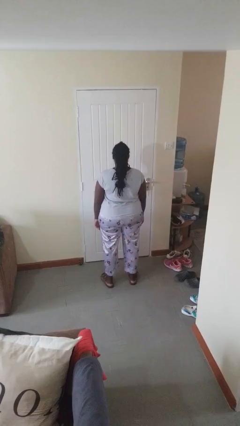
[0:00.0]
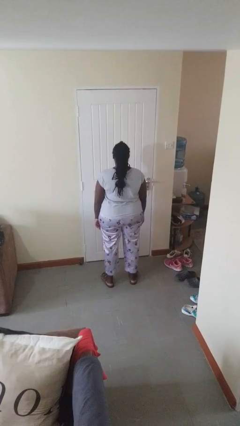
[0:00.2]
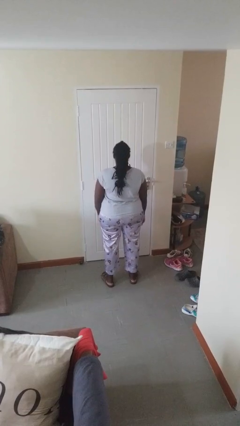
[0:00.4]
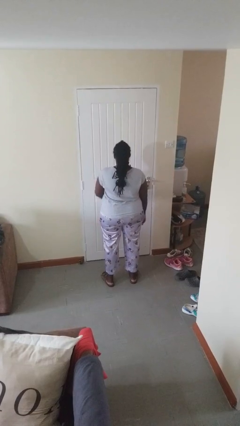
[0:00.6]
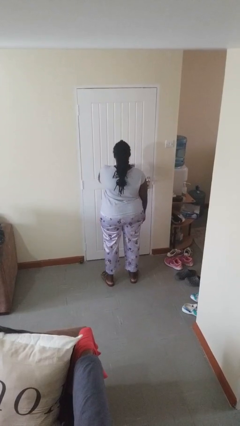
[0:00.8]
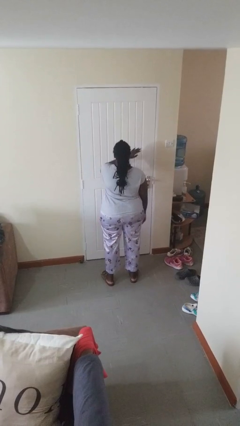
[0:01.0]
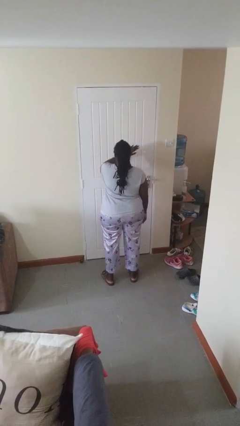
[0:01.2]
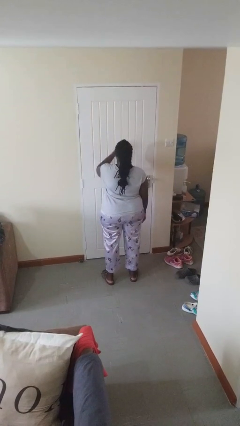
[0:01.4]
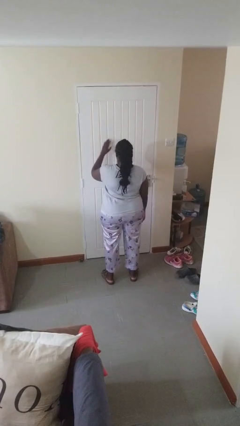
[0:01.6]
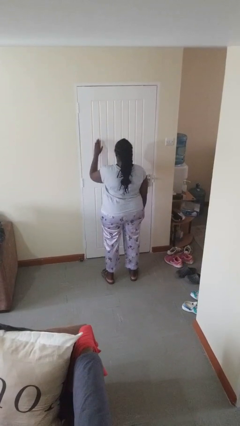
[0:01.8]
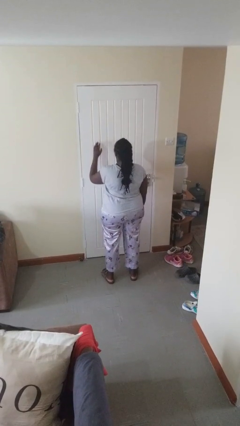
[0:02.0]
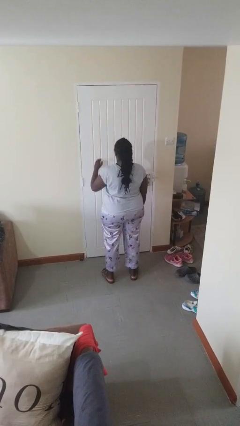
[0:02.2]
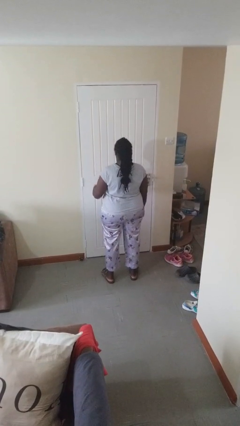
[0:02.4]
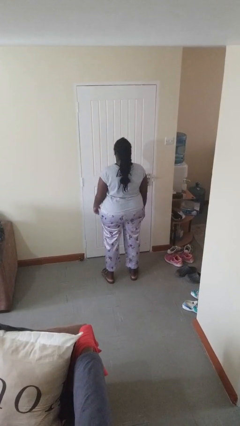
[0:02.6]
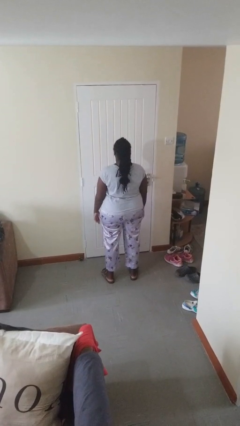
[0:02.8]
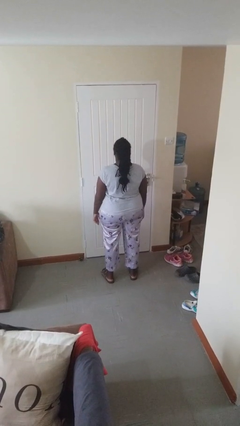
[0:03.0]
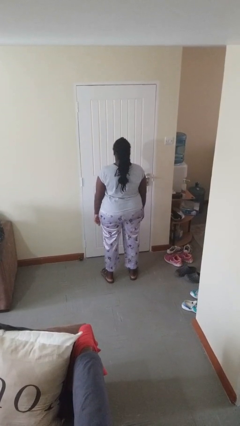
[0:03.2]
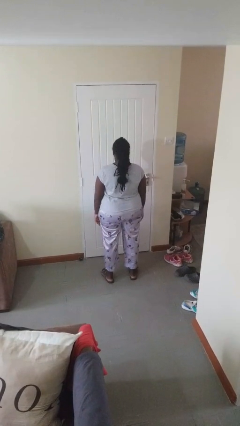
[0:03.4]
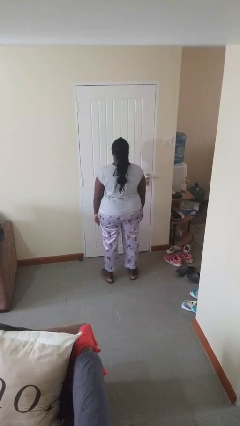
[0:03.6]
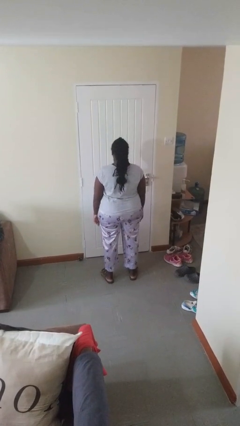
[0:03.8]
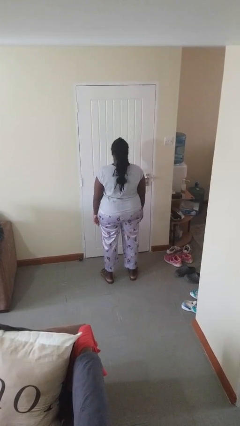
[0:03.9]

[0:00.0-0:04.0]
person gestures swipe left

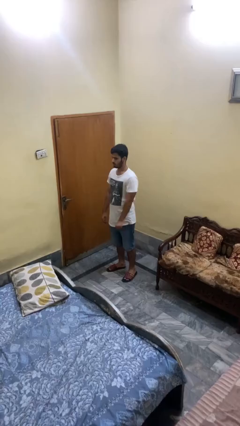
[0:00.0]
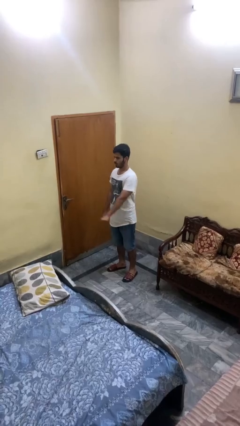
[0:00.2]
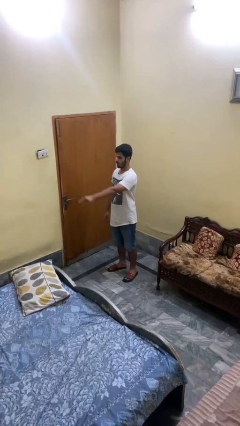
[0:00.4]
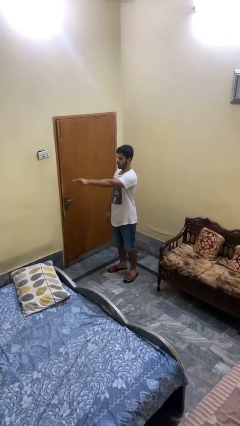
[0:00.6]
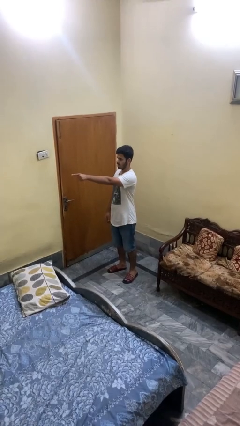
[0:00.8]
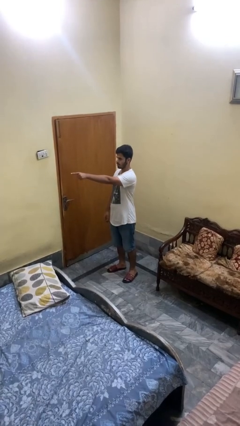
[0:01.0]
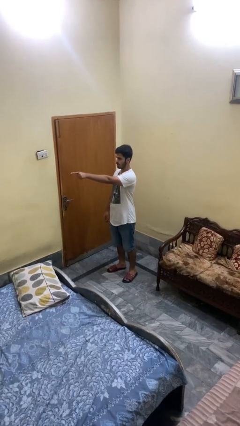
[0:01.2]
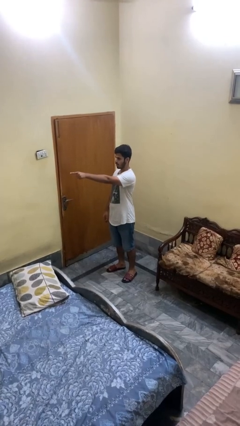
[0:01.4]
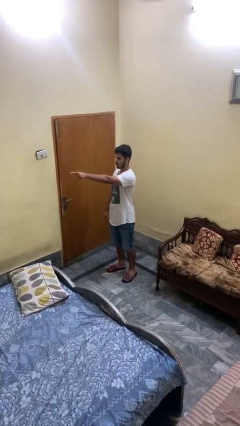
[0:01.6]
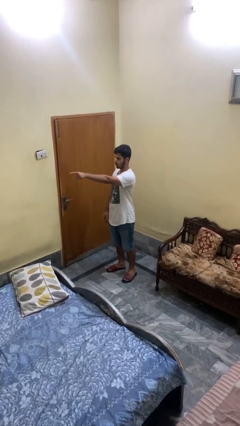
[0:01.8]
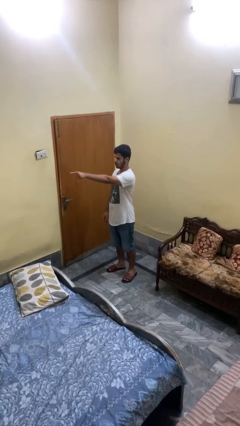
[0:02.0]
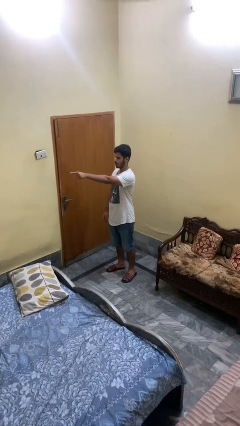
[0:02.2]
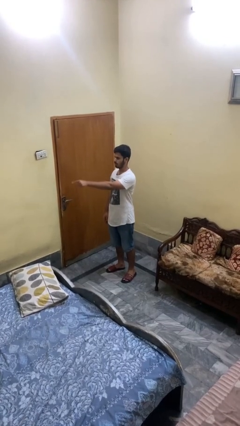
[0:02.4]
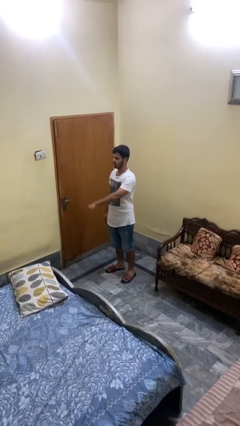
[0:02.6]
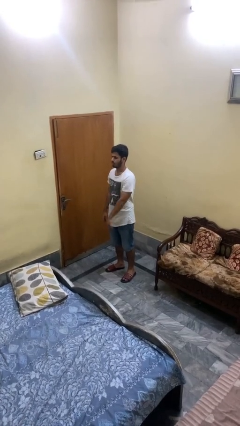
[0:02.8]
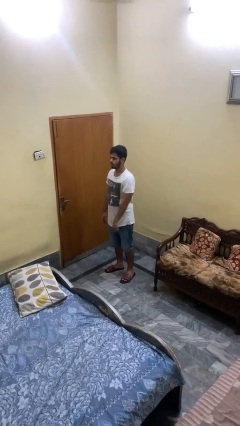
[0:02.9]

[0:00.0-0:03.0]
person points at person

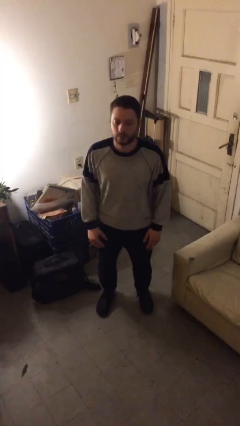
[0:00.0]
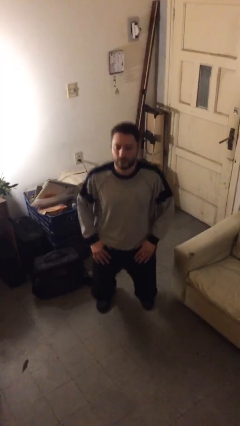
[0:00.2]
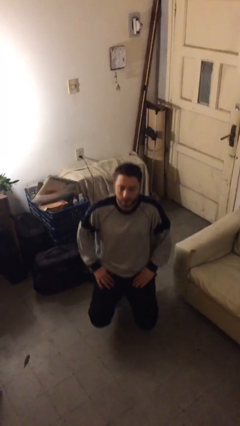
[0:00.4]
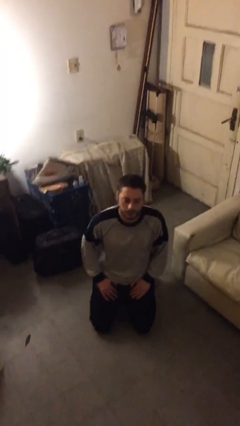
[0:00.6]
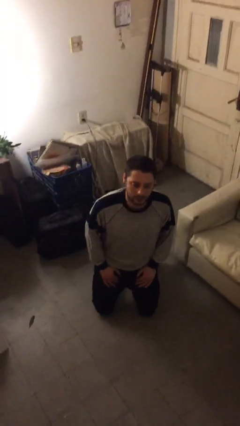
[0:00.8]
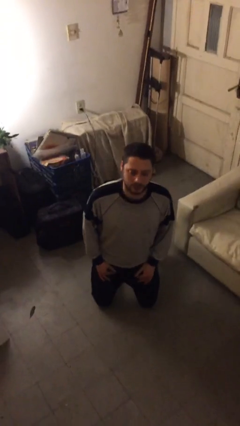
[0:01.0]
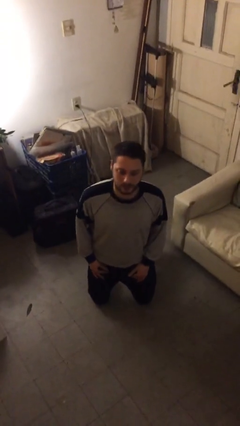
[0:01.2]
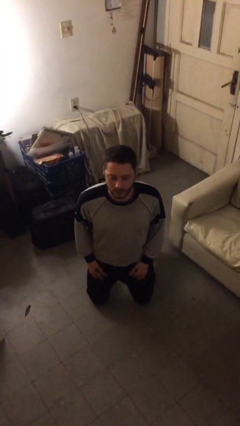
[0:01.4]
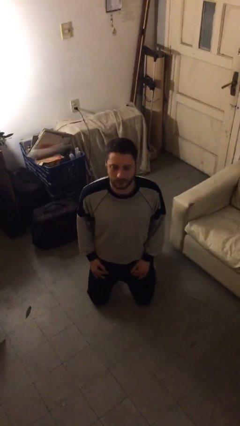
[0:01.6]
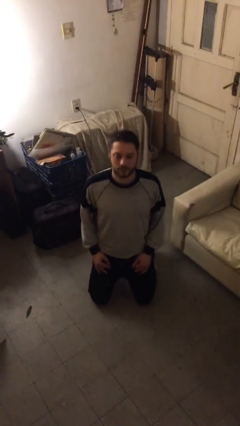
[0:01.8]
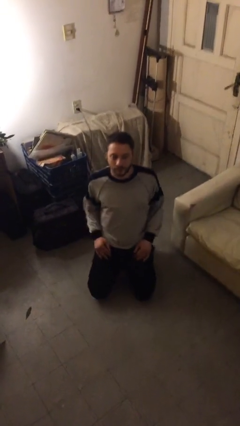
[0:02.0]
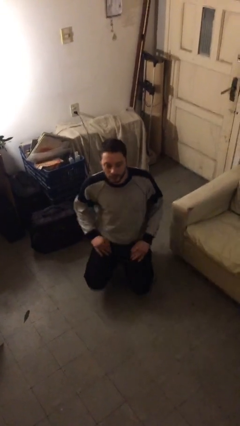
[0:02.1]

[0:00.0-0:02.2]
person kneels

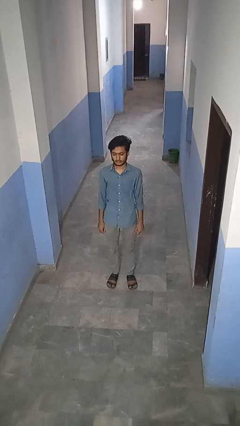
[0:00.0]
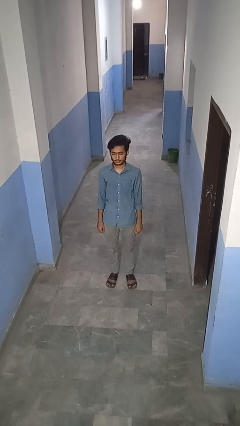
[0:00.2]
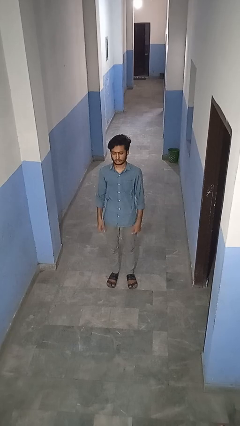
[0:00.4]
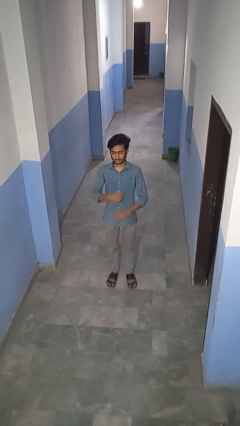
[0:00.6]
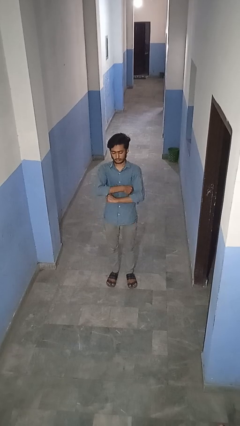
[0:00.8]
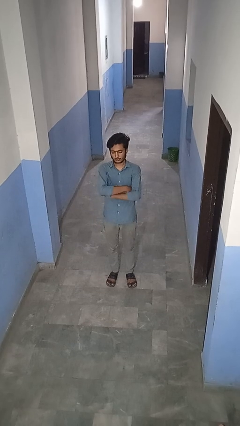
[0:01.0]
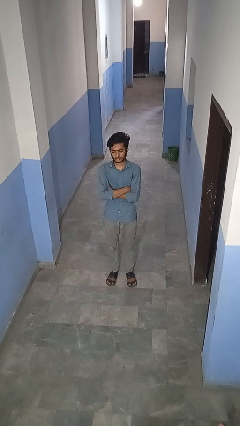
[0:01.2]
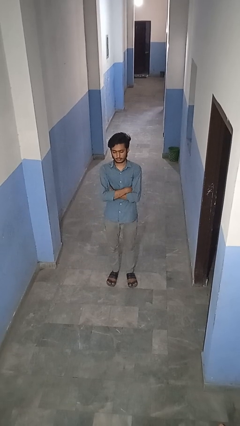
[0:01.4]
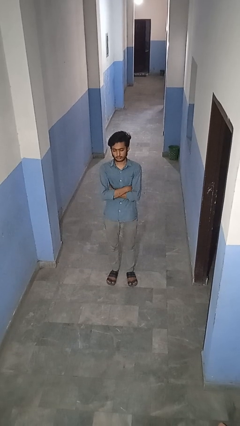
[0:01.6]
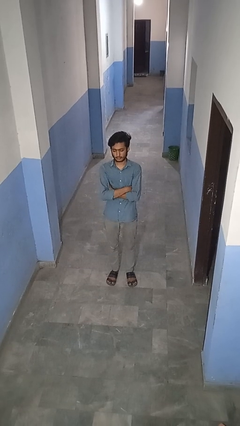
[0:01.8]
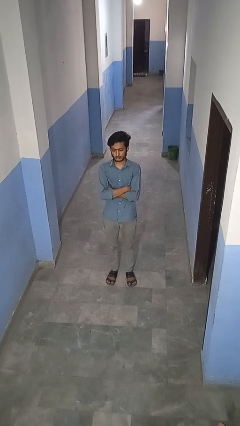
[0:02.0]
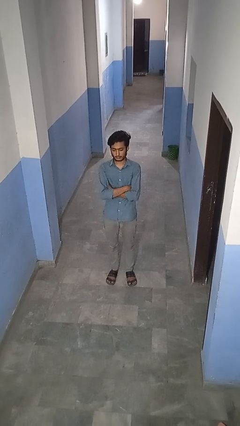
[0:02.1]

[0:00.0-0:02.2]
person crosses arms

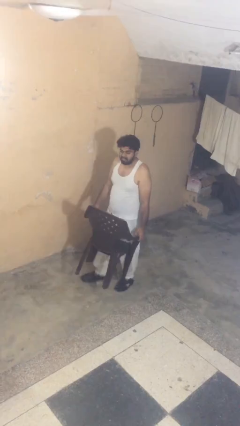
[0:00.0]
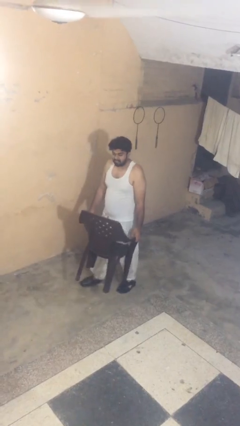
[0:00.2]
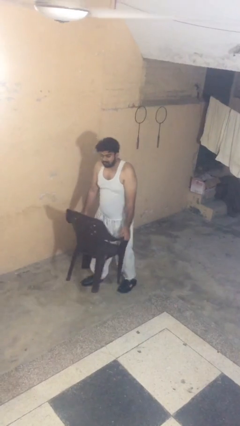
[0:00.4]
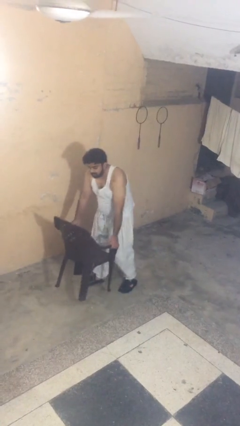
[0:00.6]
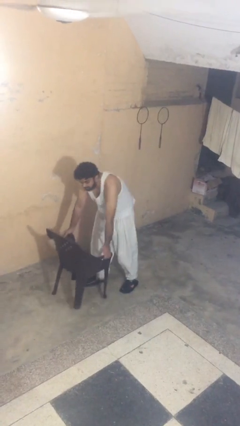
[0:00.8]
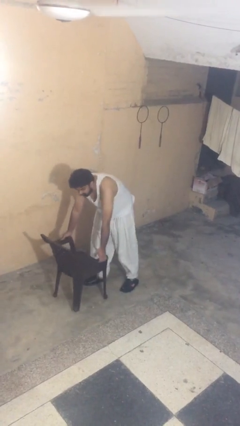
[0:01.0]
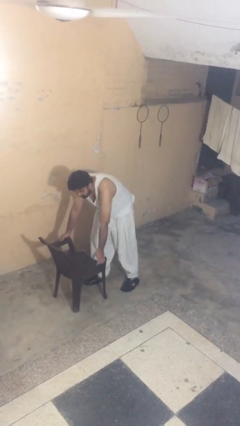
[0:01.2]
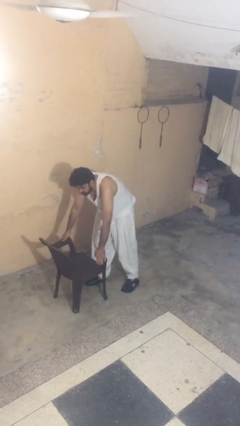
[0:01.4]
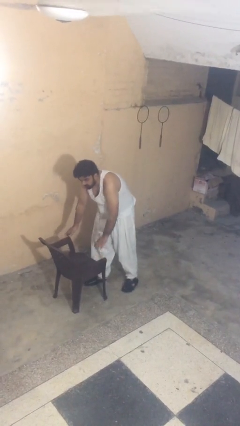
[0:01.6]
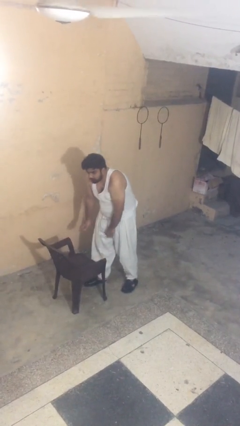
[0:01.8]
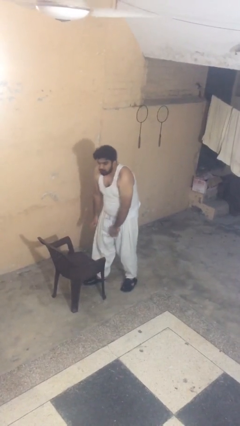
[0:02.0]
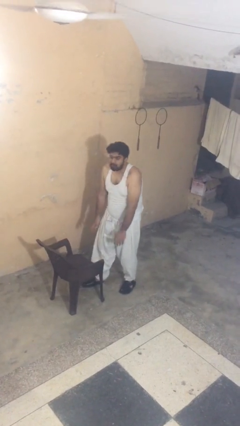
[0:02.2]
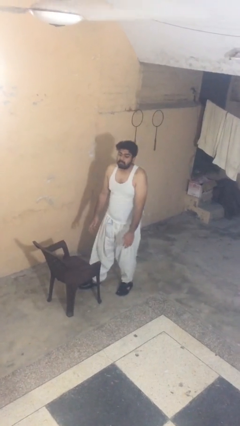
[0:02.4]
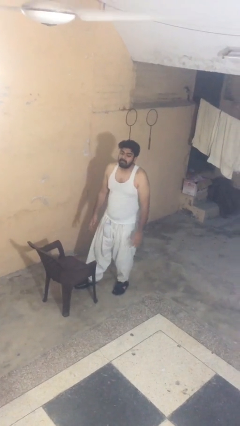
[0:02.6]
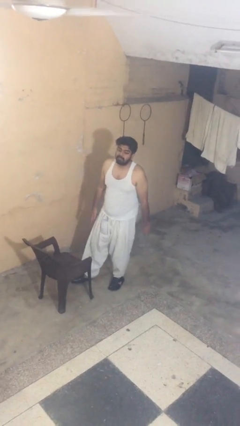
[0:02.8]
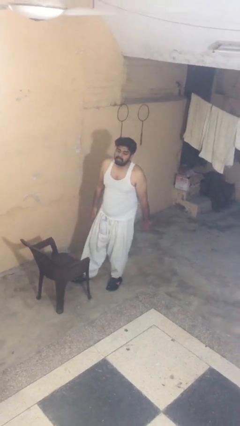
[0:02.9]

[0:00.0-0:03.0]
person puts down object on floor

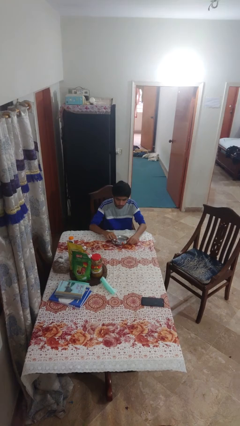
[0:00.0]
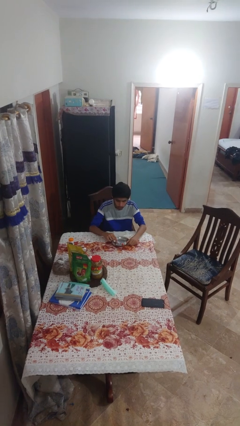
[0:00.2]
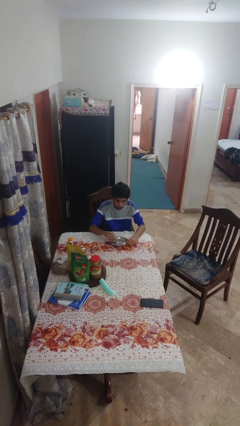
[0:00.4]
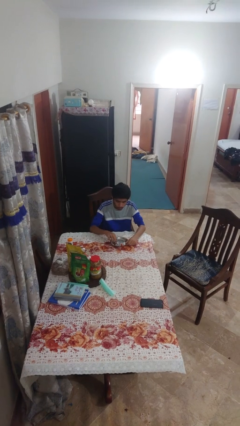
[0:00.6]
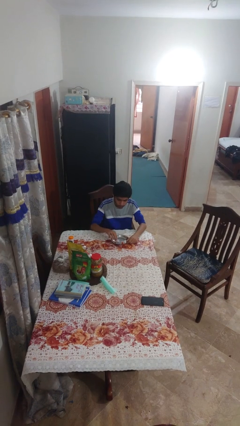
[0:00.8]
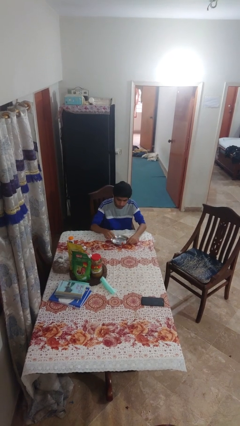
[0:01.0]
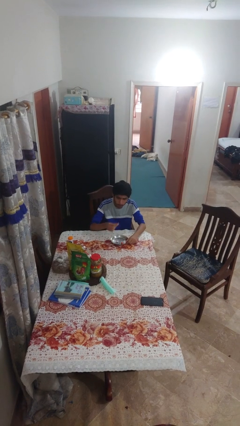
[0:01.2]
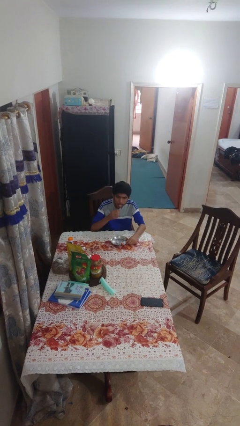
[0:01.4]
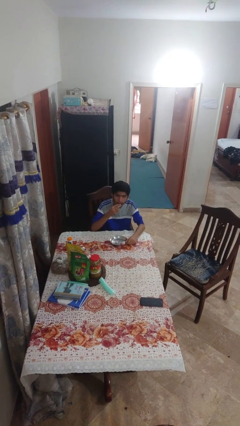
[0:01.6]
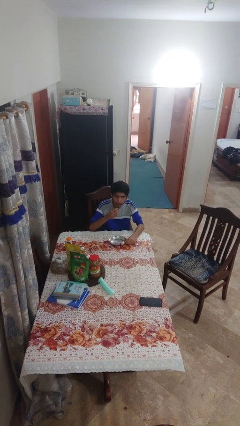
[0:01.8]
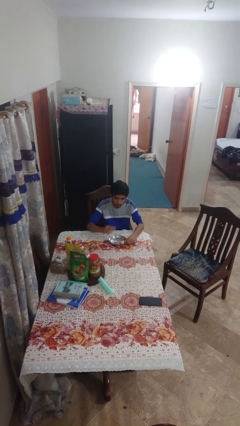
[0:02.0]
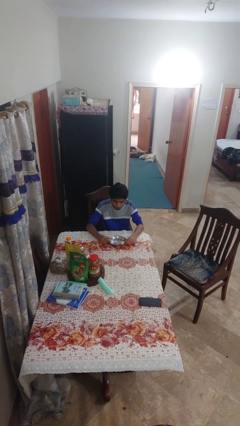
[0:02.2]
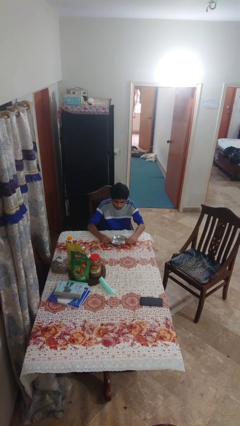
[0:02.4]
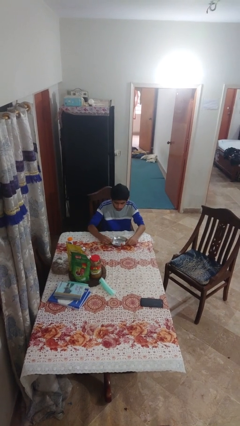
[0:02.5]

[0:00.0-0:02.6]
person eats with hands

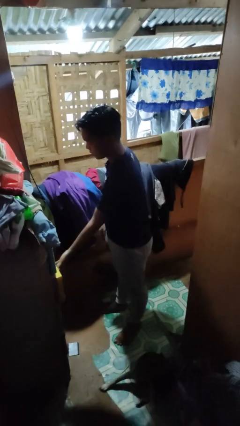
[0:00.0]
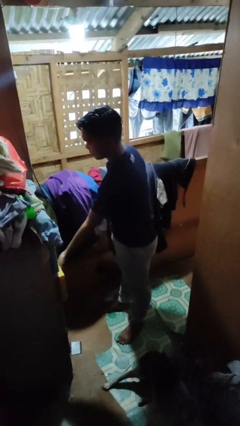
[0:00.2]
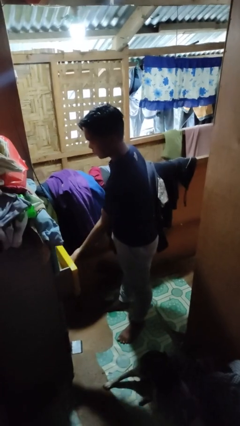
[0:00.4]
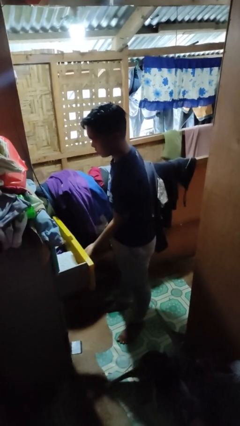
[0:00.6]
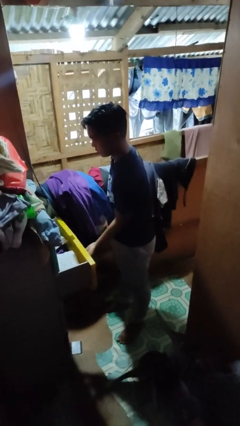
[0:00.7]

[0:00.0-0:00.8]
person opens dresser drawer
